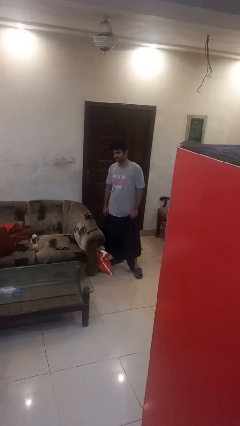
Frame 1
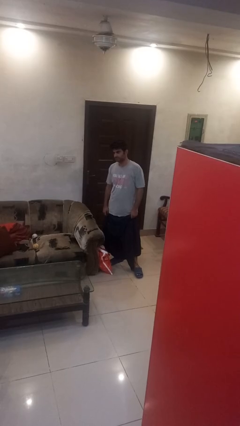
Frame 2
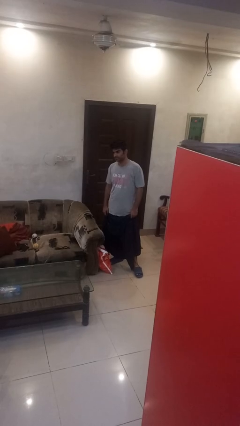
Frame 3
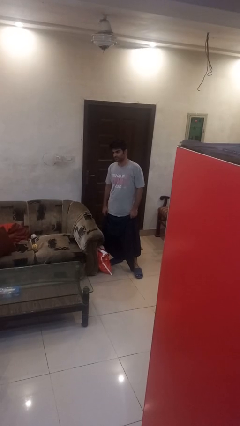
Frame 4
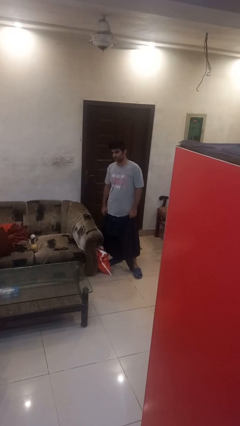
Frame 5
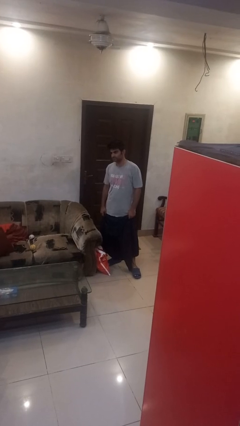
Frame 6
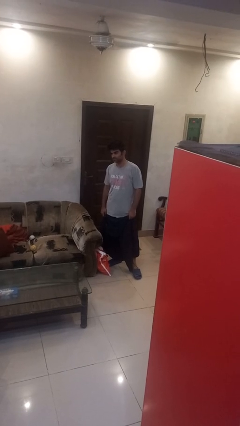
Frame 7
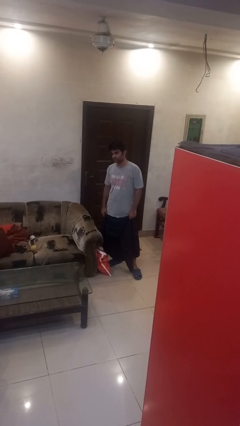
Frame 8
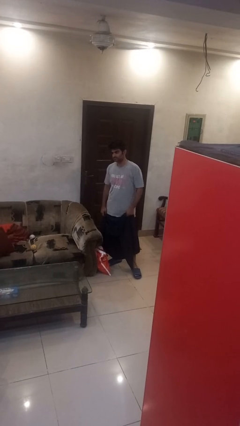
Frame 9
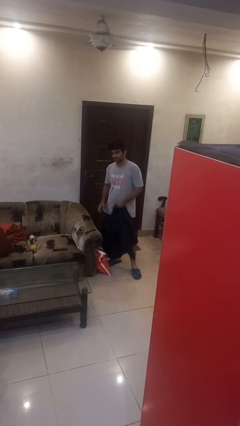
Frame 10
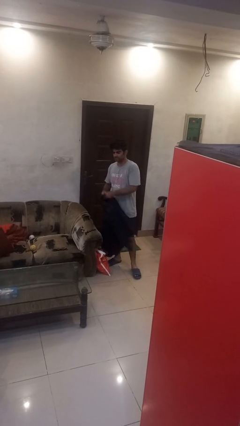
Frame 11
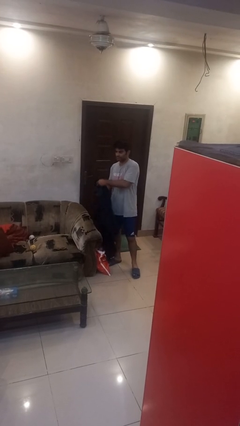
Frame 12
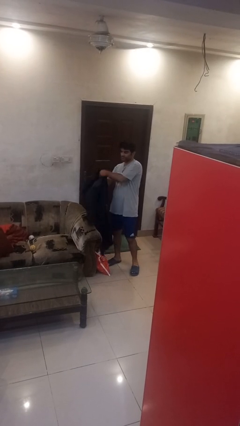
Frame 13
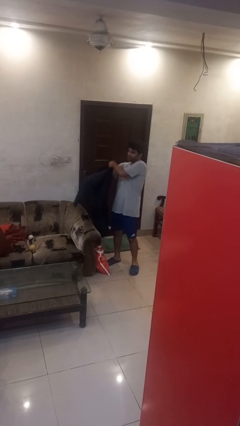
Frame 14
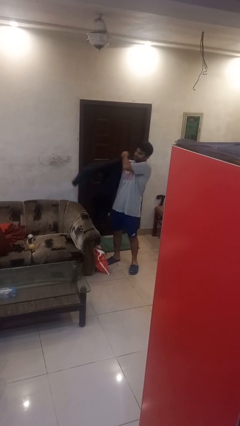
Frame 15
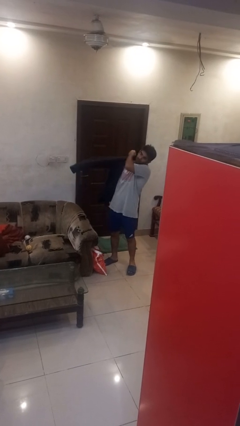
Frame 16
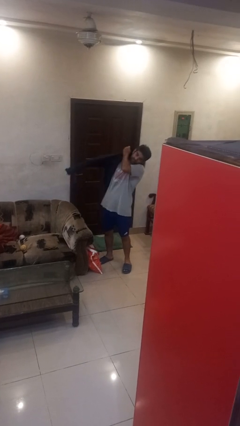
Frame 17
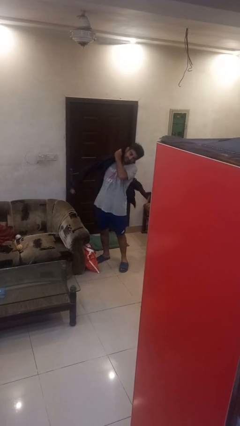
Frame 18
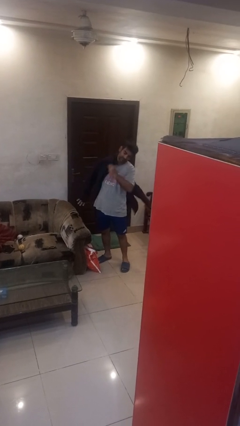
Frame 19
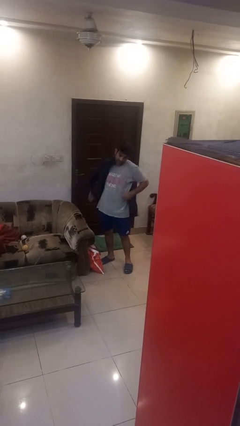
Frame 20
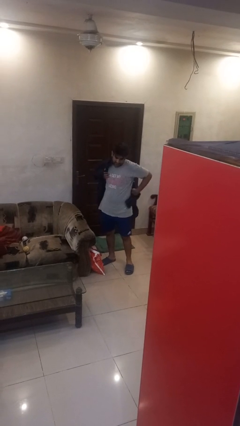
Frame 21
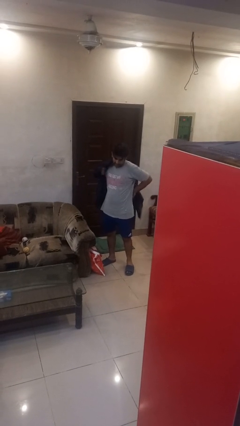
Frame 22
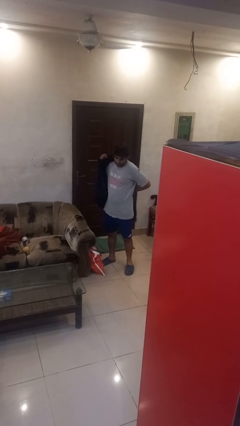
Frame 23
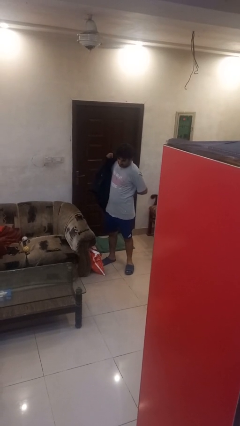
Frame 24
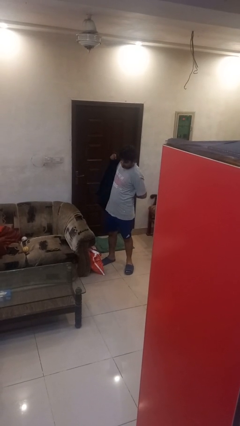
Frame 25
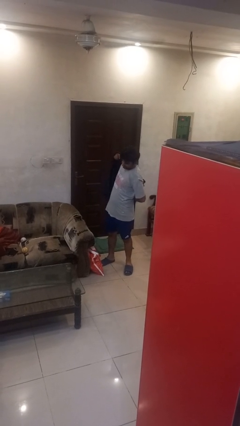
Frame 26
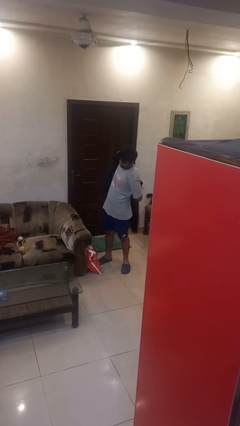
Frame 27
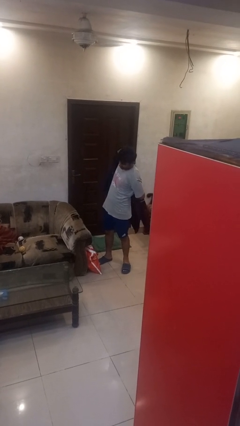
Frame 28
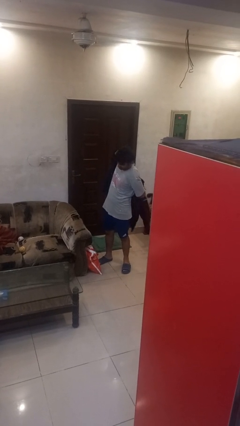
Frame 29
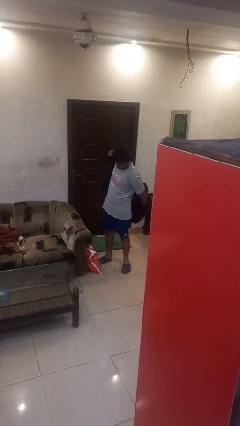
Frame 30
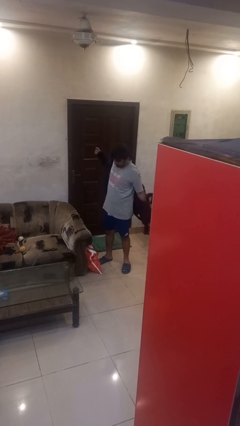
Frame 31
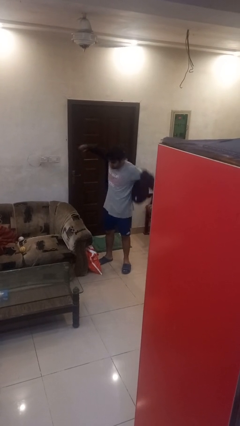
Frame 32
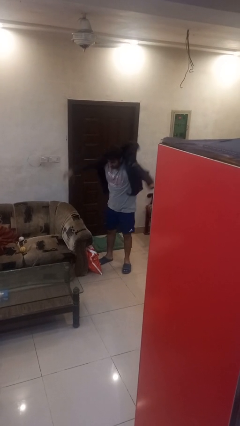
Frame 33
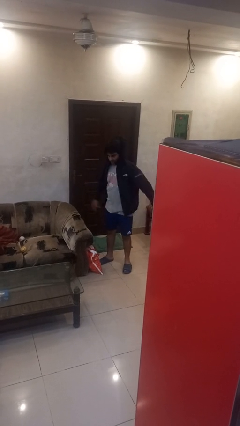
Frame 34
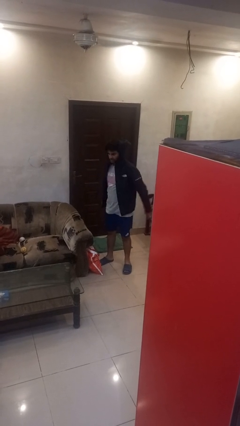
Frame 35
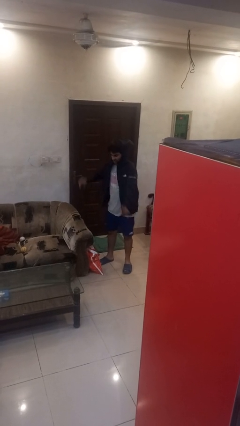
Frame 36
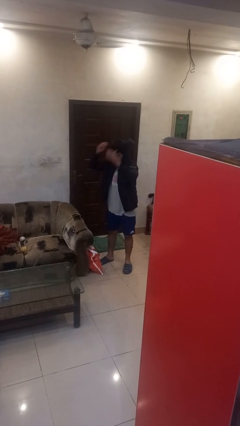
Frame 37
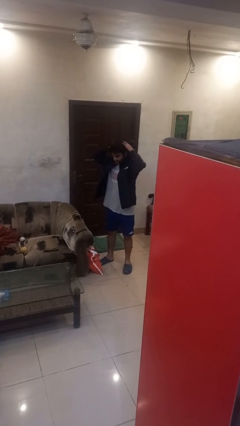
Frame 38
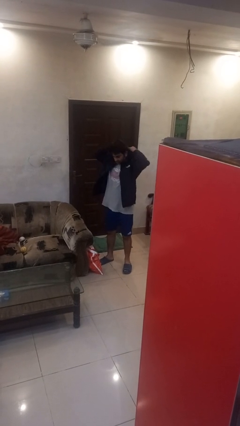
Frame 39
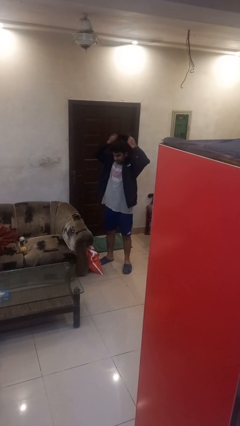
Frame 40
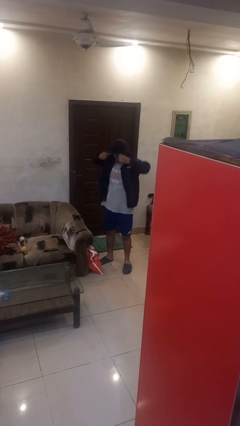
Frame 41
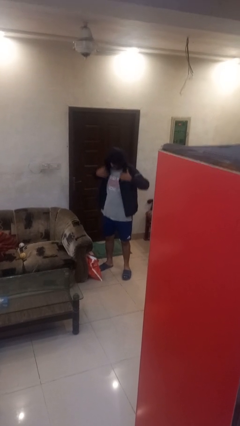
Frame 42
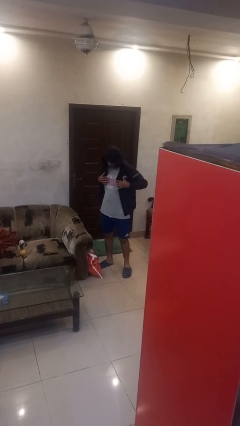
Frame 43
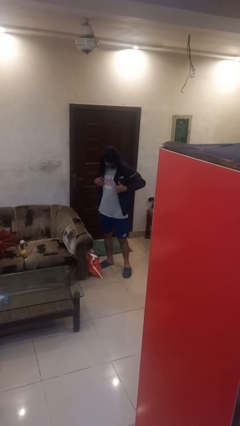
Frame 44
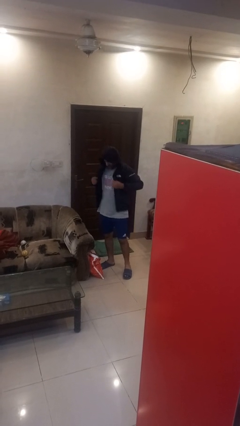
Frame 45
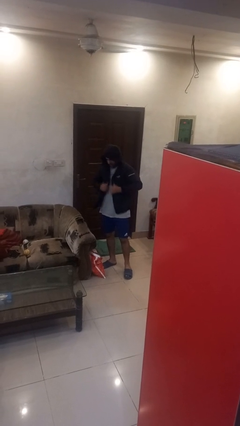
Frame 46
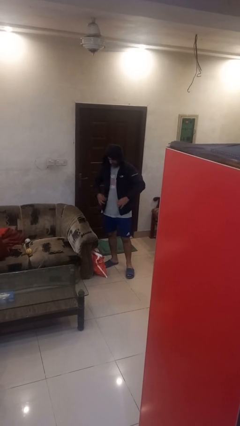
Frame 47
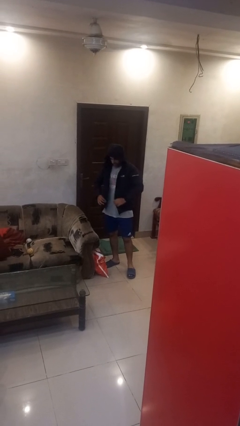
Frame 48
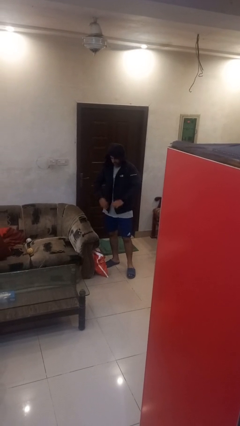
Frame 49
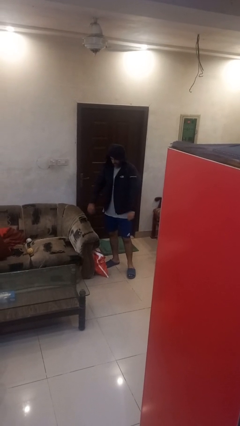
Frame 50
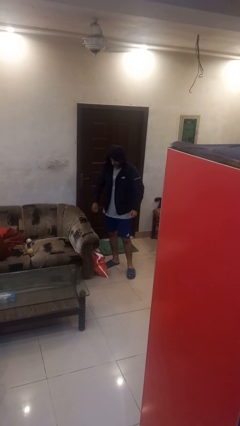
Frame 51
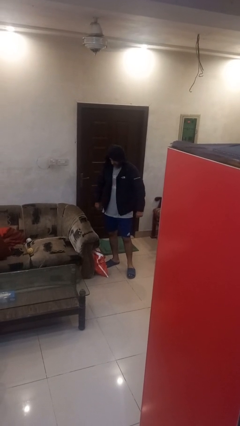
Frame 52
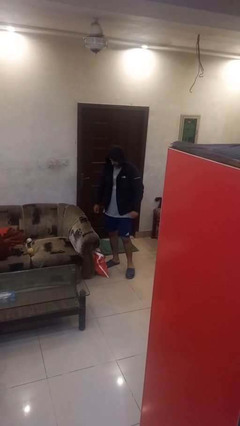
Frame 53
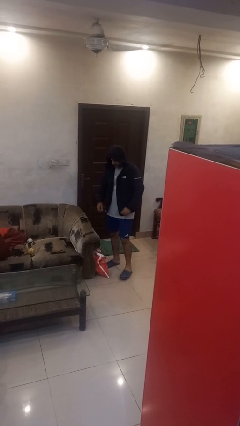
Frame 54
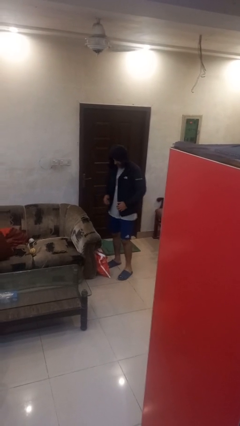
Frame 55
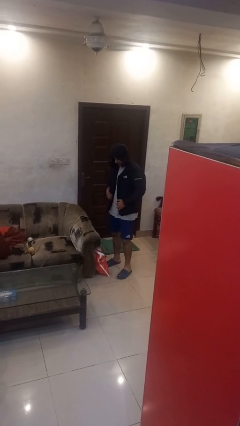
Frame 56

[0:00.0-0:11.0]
person puts on hoodie

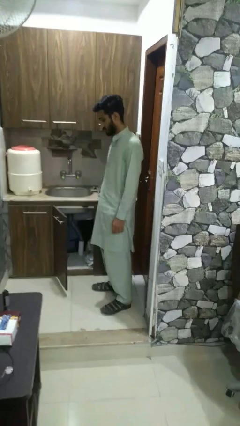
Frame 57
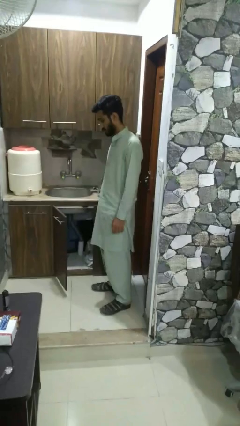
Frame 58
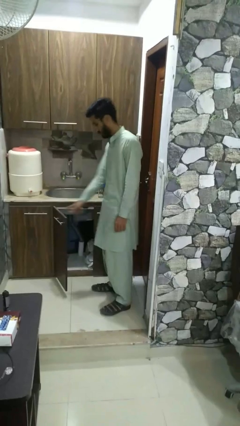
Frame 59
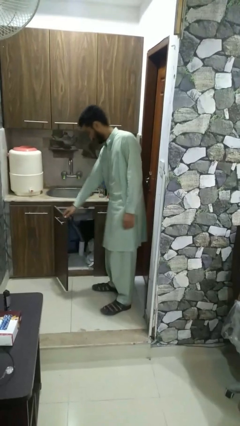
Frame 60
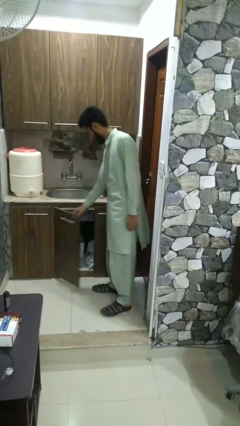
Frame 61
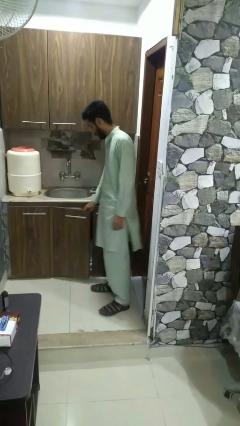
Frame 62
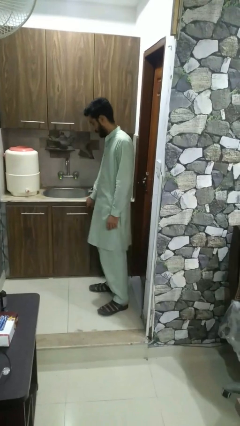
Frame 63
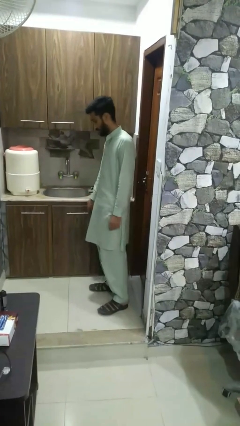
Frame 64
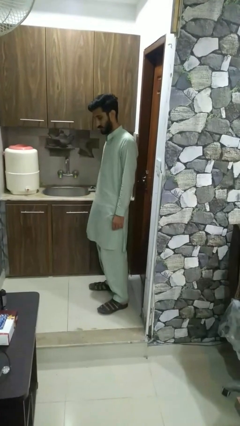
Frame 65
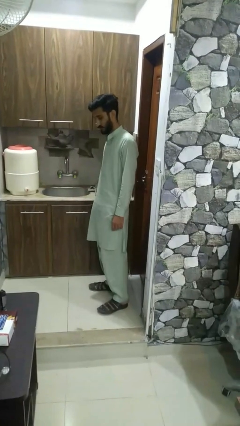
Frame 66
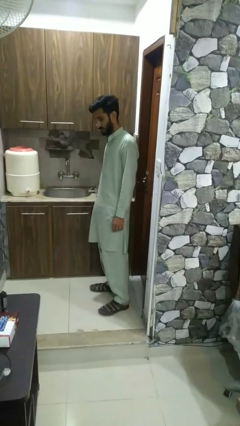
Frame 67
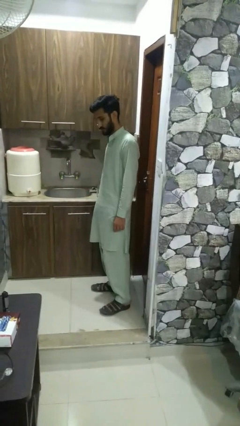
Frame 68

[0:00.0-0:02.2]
person closes closet door

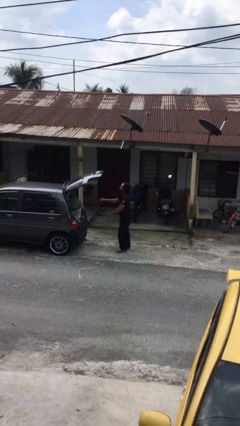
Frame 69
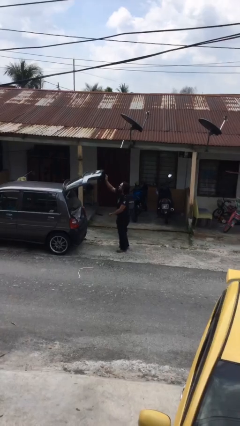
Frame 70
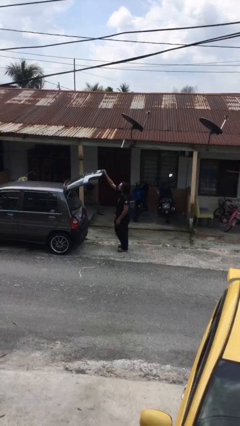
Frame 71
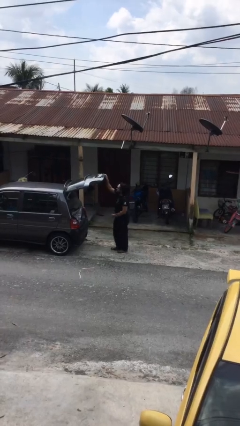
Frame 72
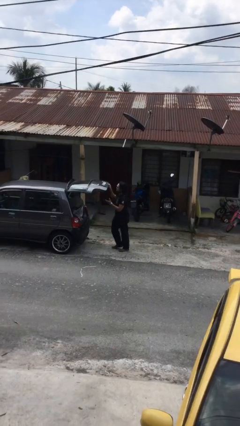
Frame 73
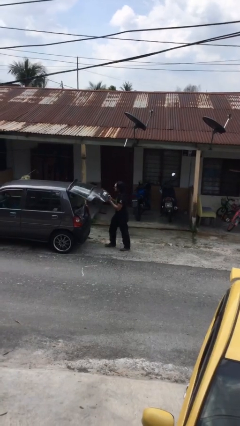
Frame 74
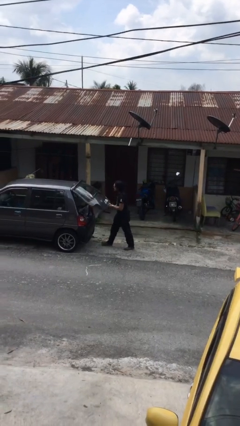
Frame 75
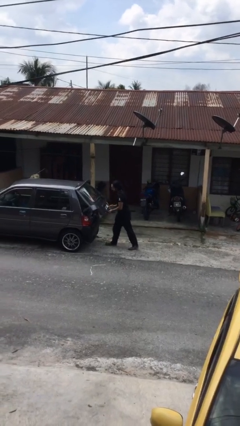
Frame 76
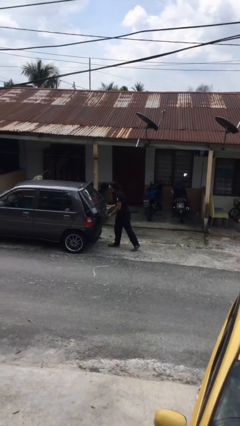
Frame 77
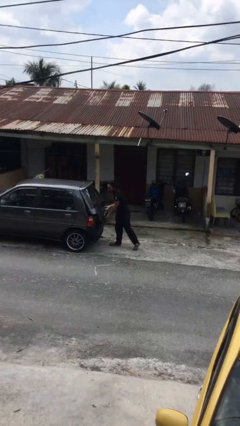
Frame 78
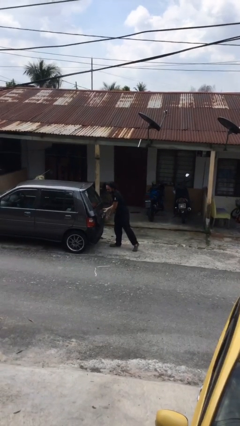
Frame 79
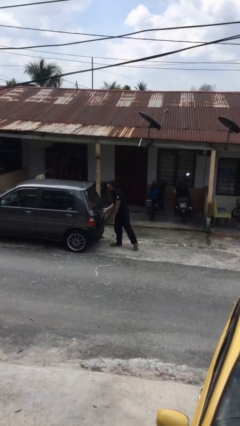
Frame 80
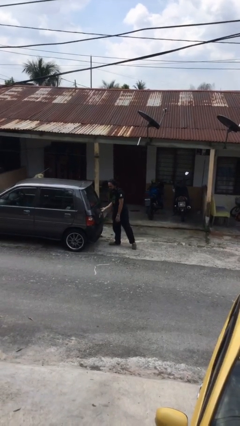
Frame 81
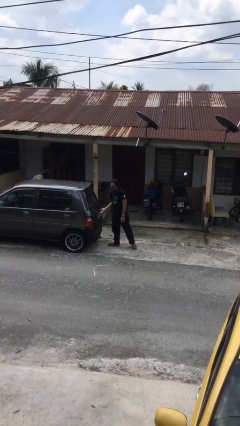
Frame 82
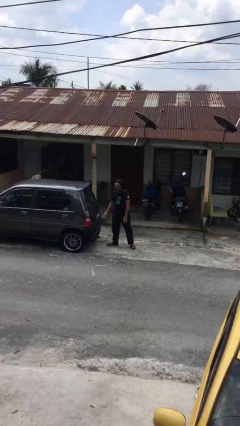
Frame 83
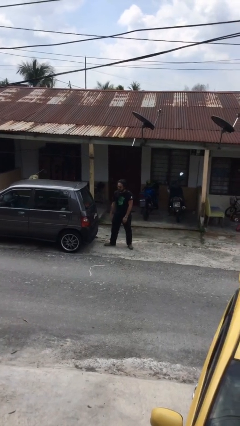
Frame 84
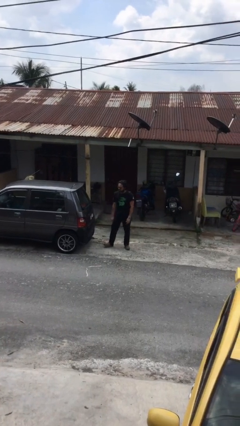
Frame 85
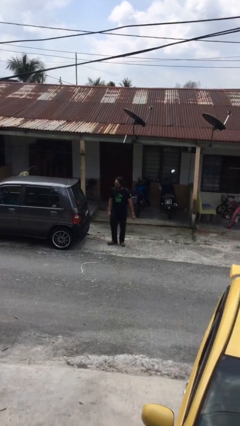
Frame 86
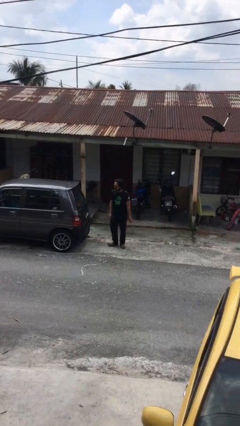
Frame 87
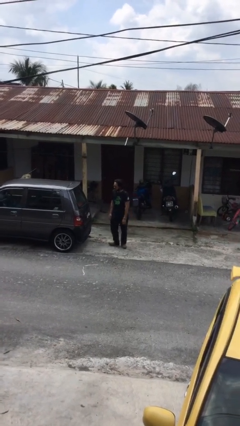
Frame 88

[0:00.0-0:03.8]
person closes car trunk

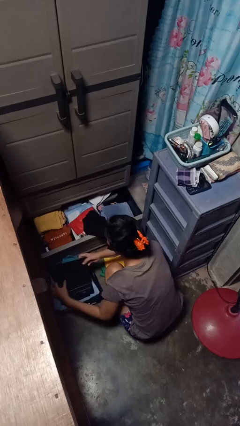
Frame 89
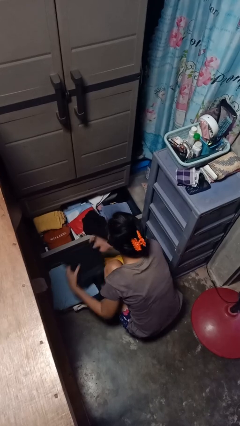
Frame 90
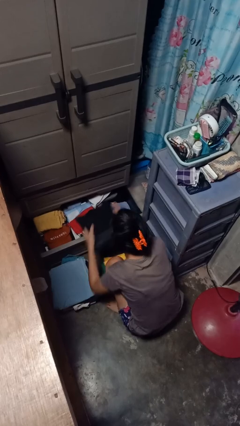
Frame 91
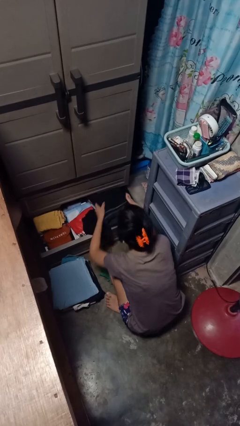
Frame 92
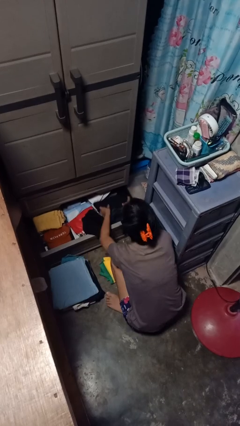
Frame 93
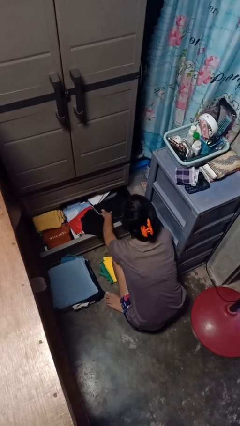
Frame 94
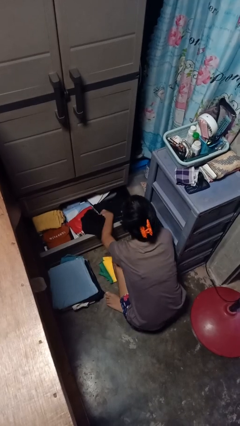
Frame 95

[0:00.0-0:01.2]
person puts clothes into dresser
